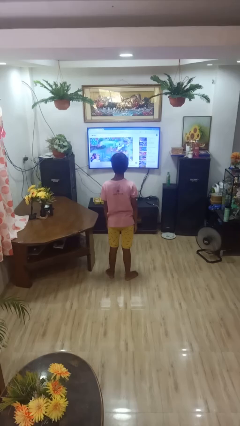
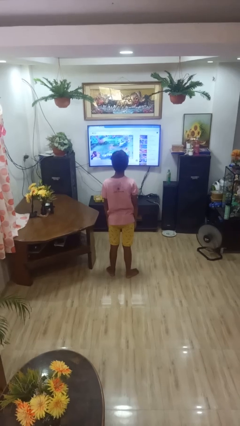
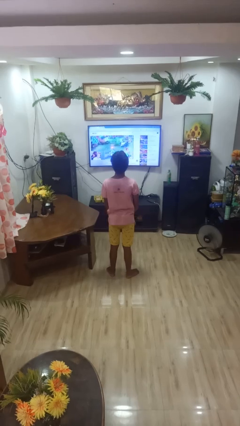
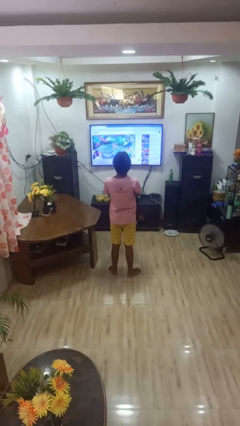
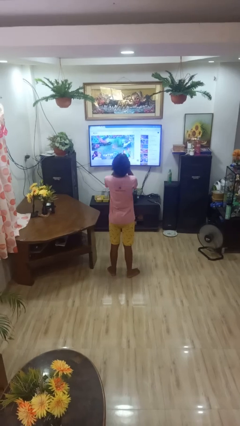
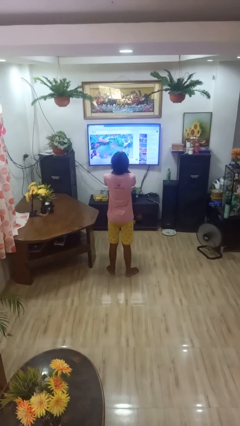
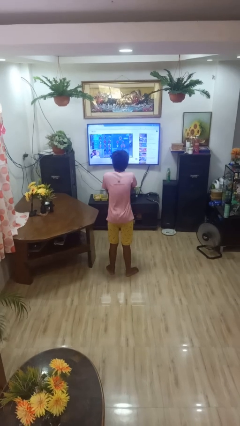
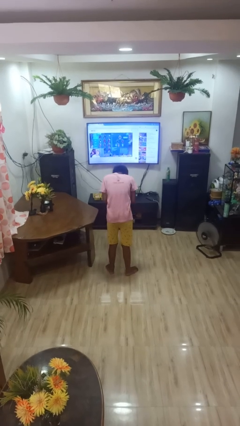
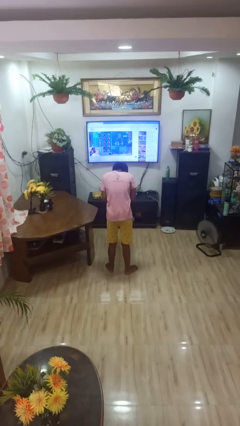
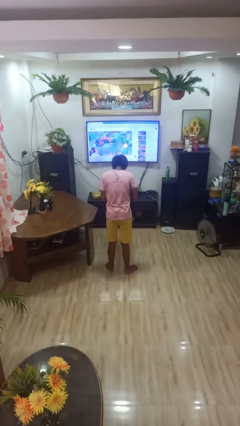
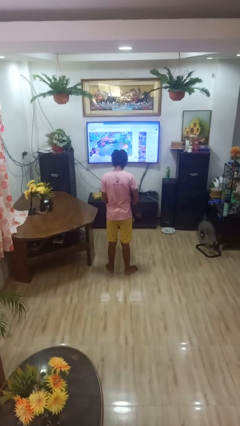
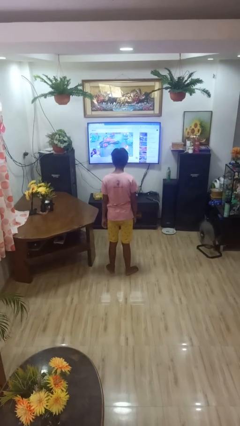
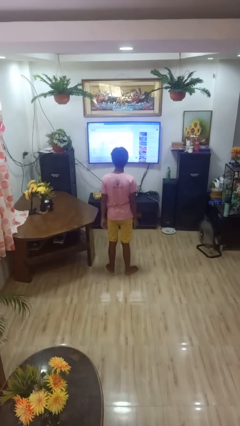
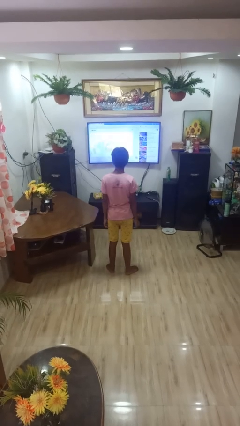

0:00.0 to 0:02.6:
person sneezes into hand

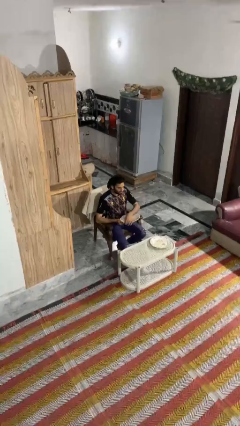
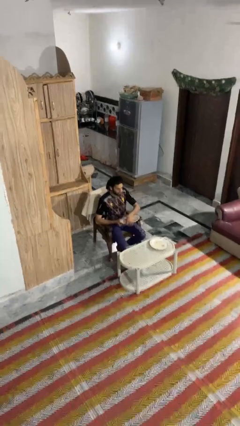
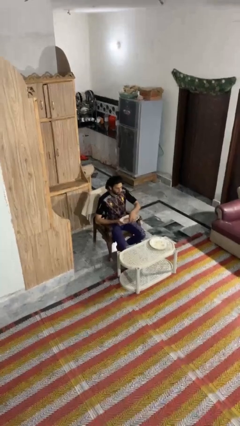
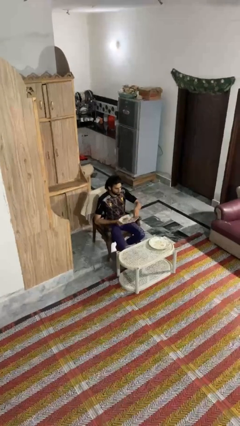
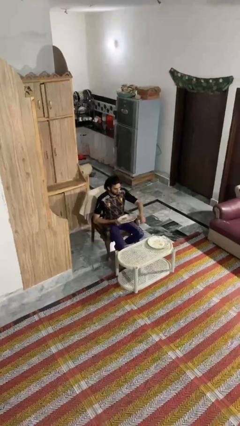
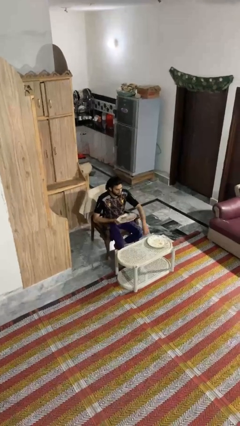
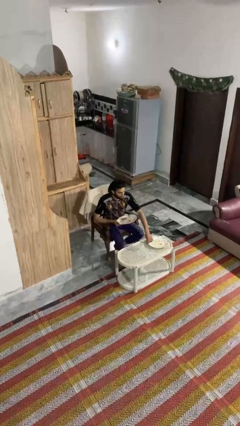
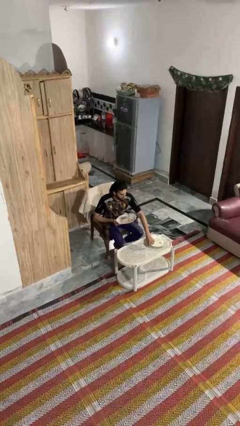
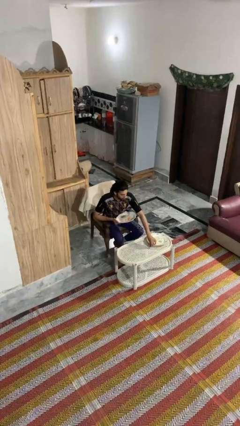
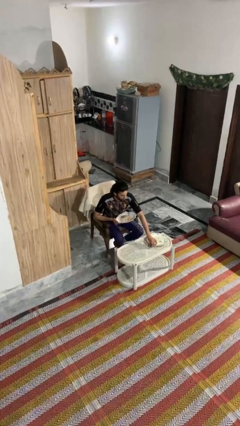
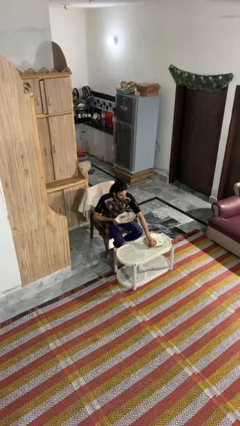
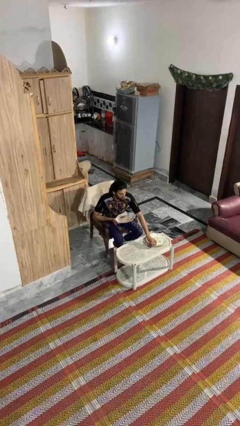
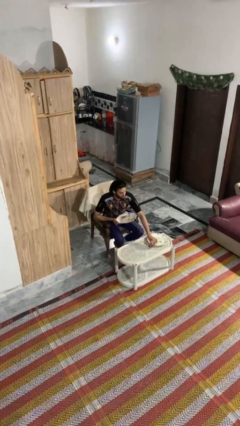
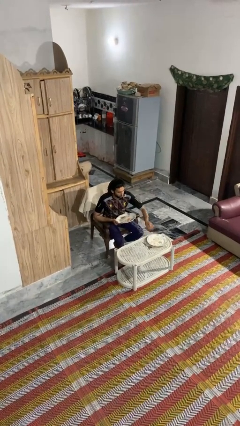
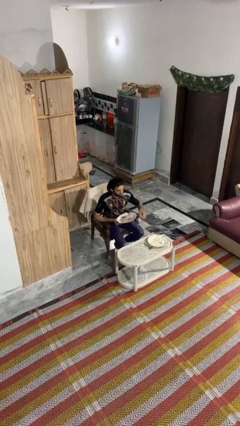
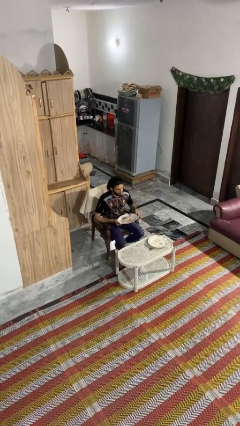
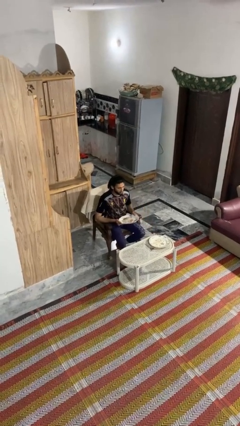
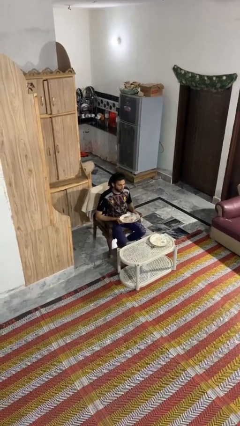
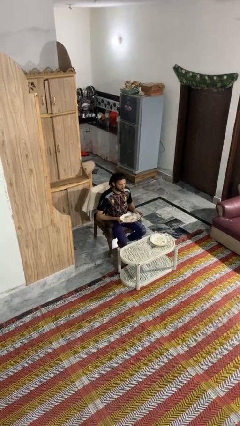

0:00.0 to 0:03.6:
person sets table

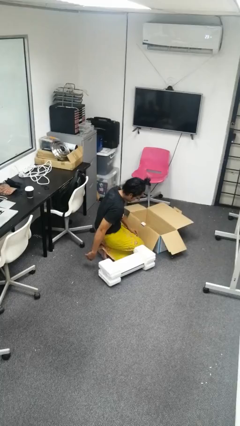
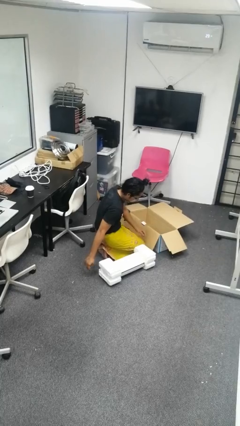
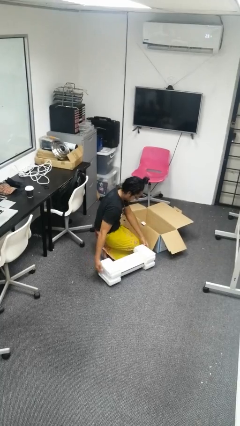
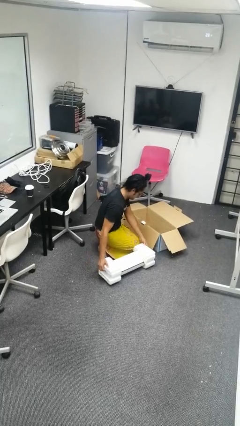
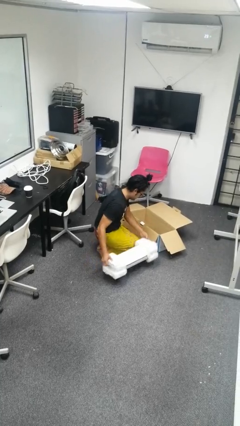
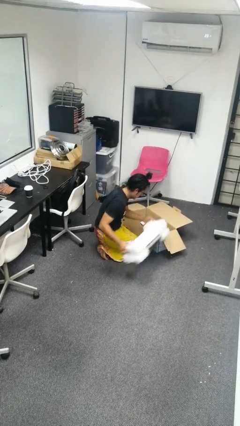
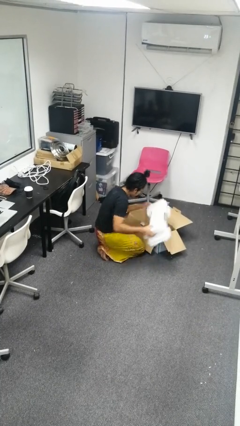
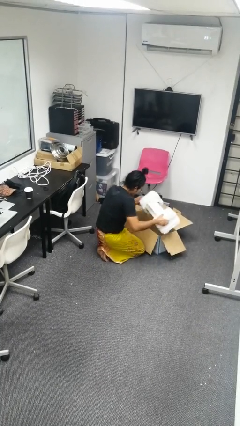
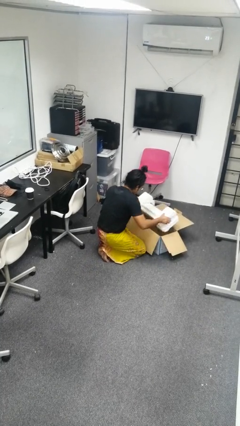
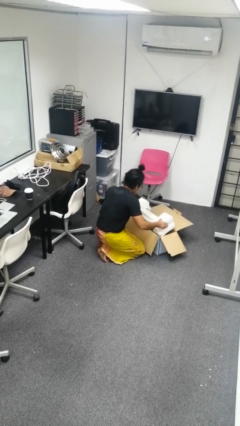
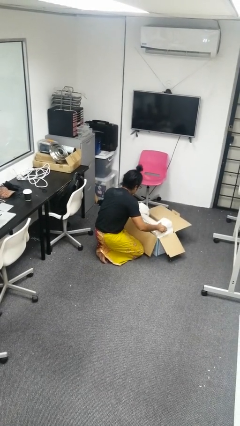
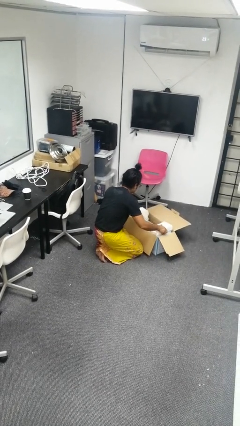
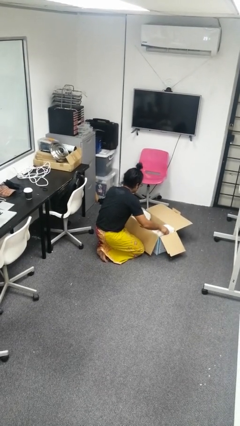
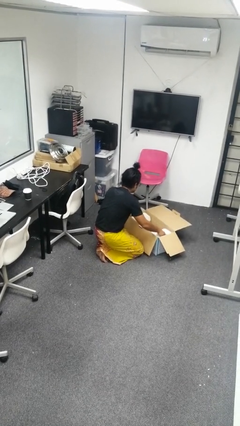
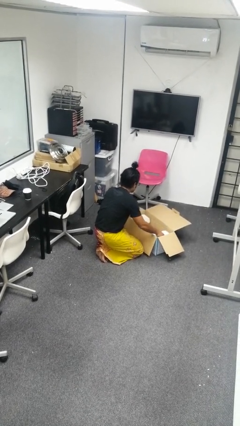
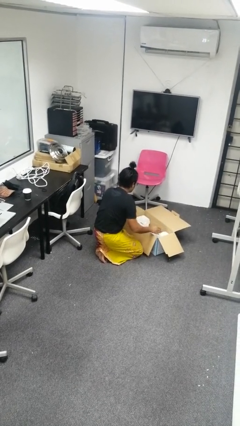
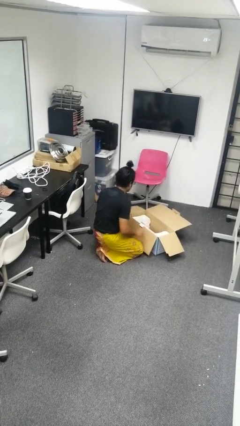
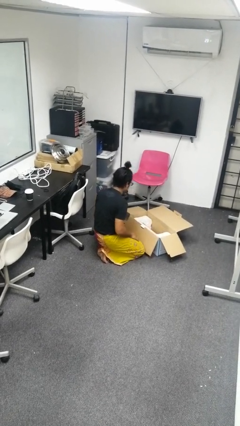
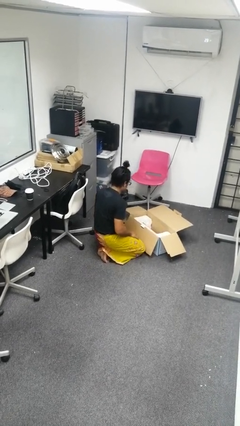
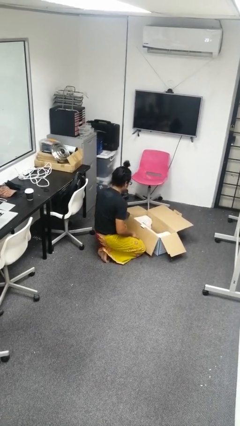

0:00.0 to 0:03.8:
person puts object into box

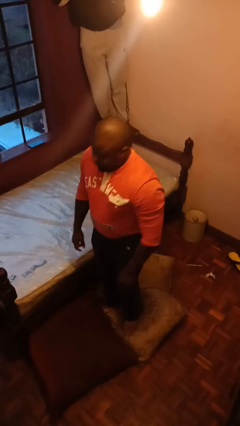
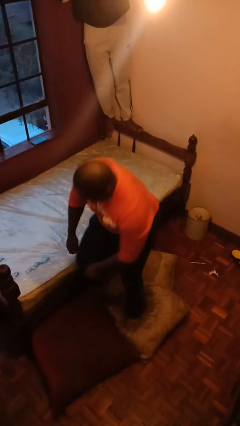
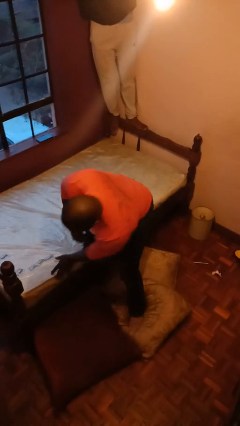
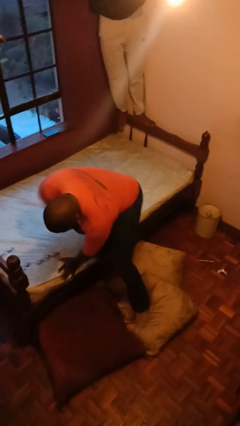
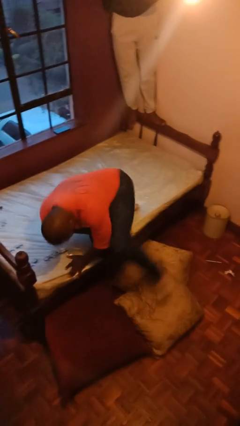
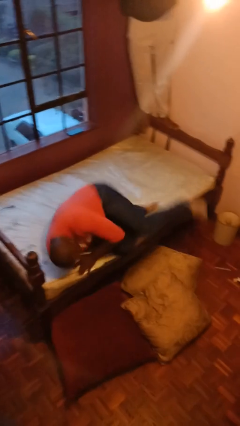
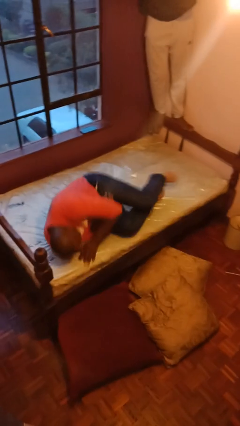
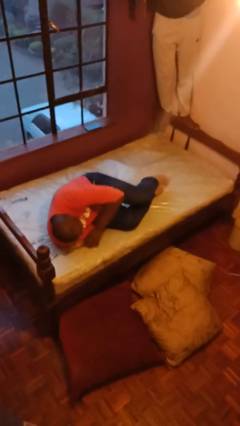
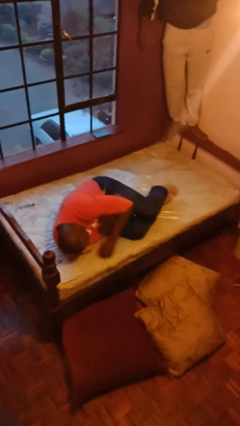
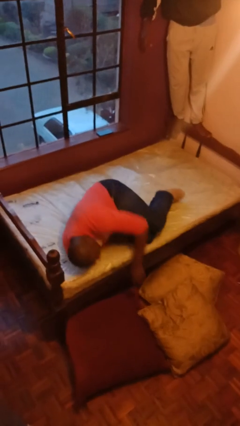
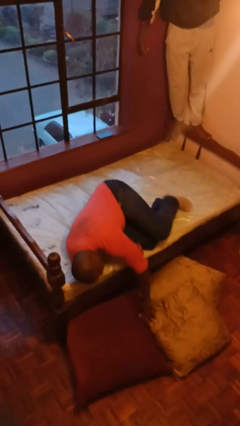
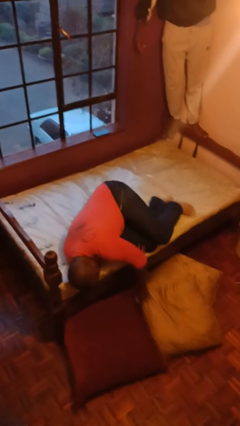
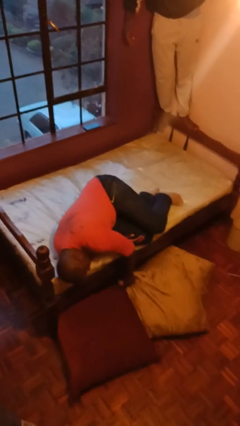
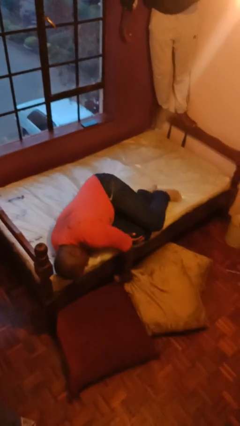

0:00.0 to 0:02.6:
person lies down on bed

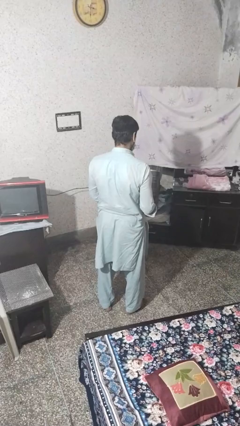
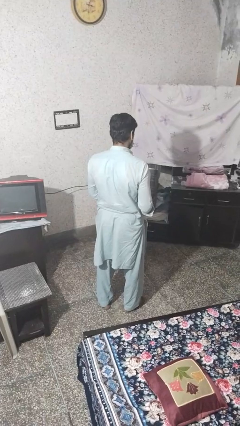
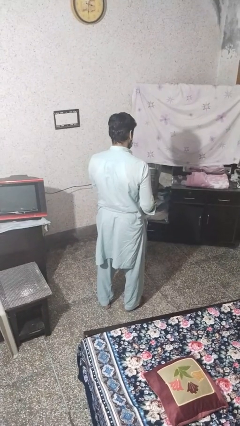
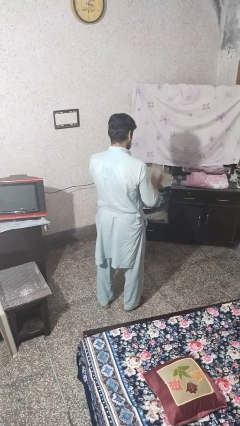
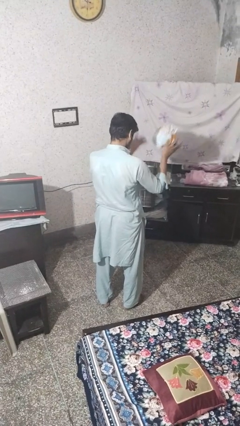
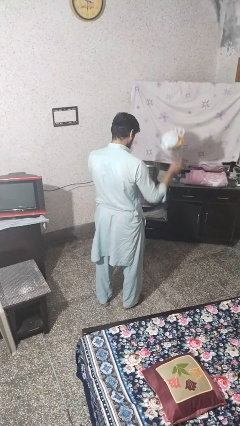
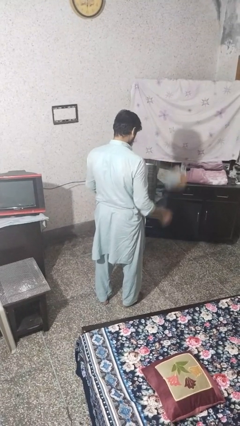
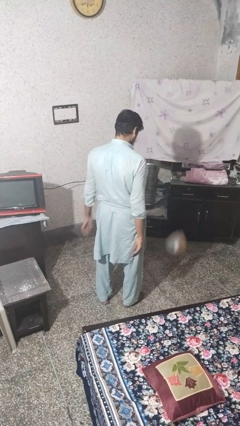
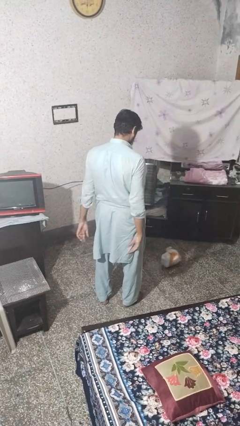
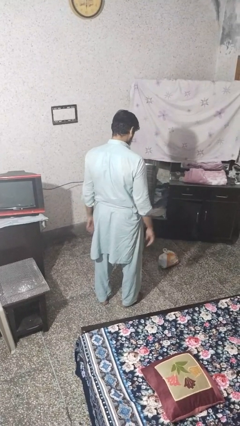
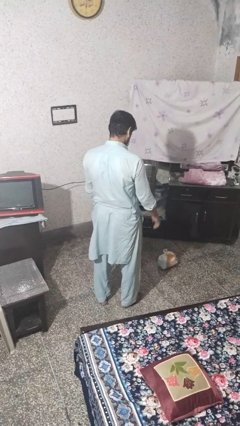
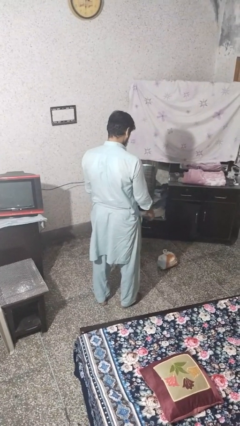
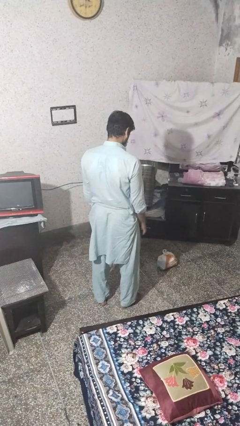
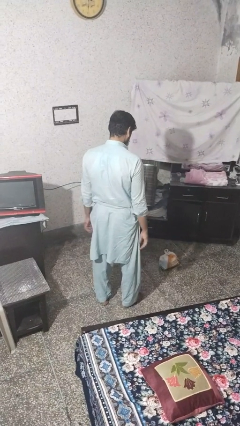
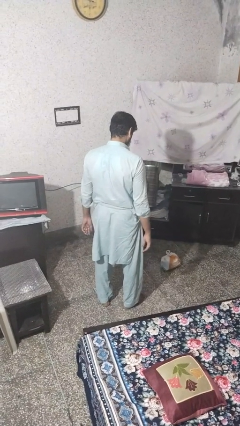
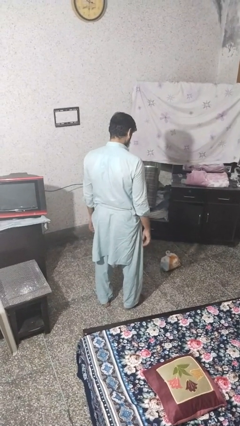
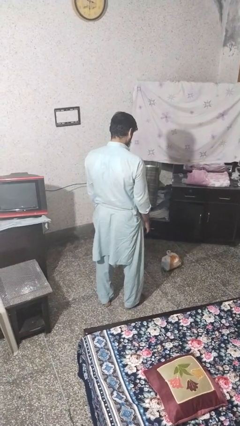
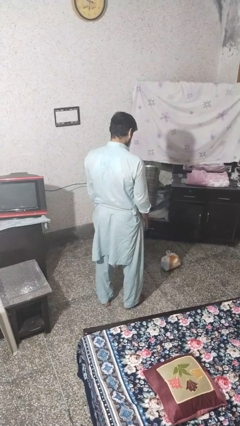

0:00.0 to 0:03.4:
person throws object to ground

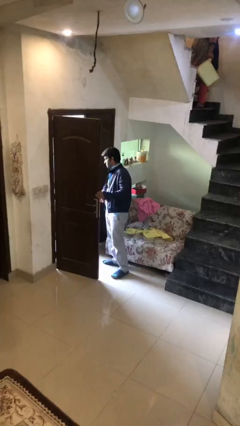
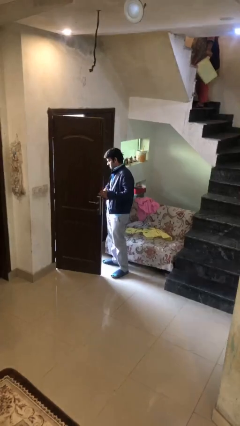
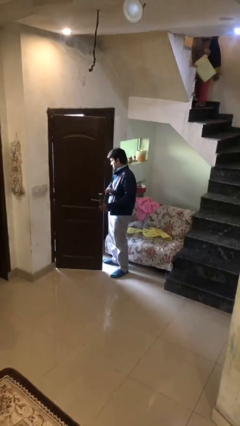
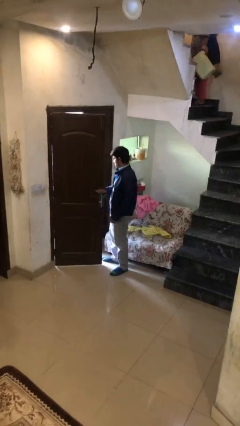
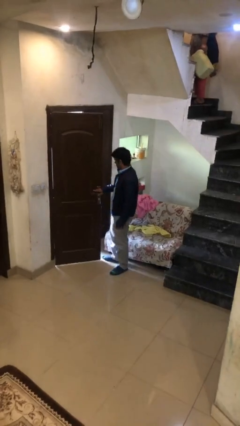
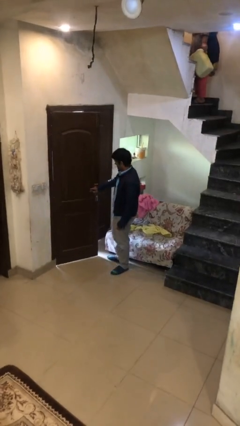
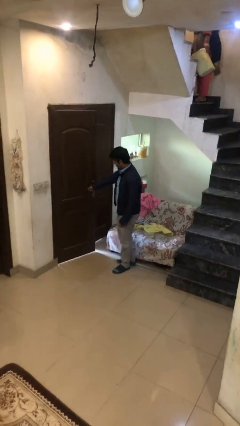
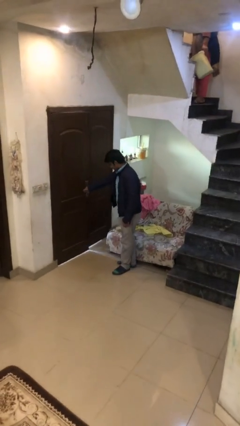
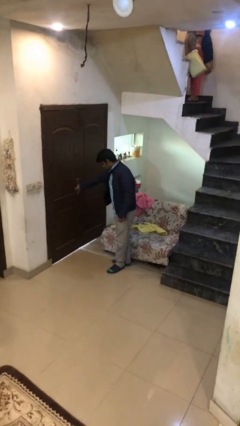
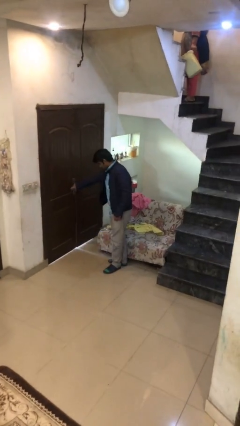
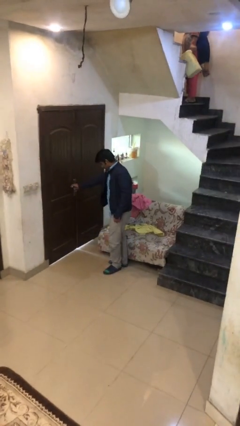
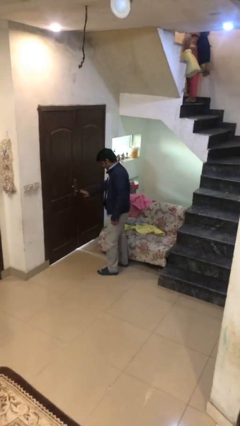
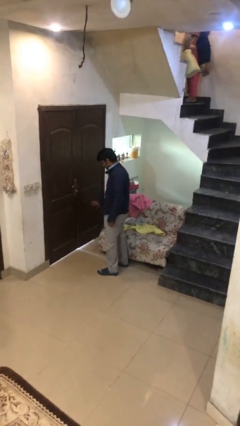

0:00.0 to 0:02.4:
person closes facility door
